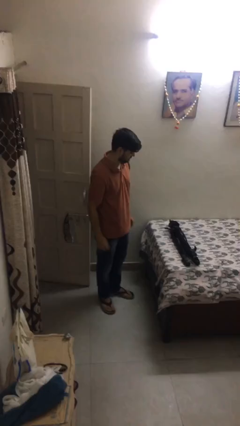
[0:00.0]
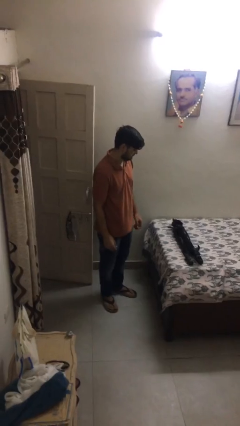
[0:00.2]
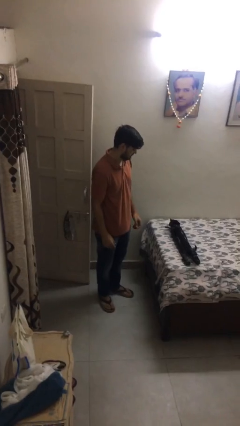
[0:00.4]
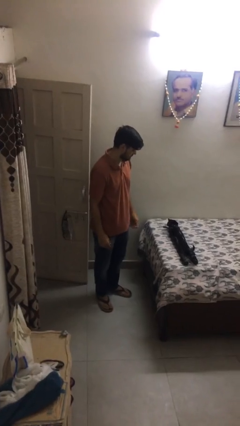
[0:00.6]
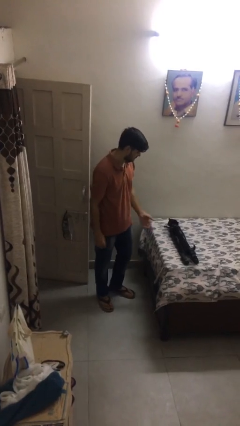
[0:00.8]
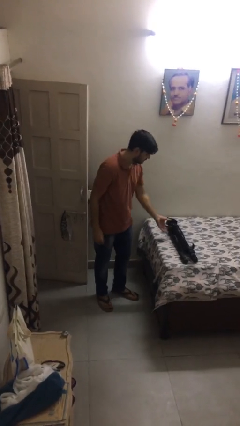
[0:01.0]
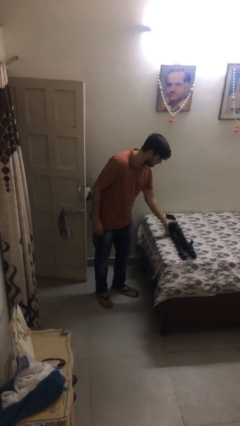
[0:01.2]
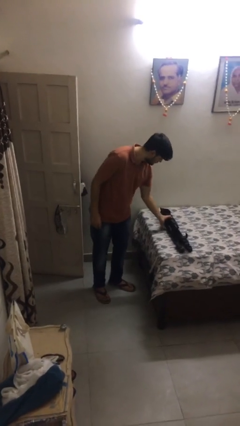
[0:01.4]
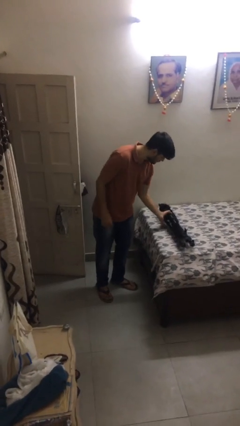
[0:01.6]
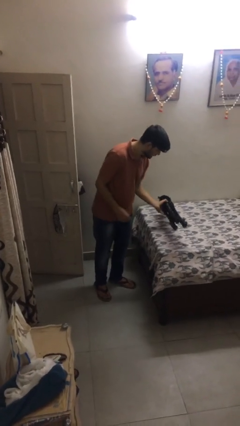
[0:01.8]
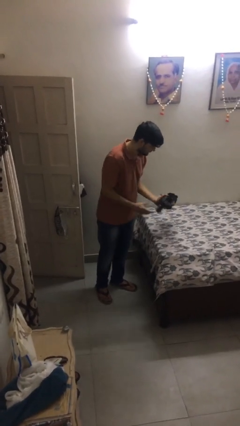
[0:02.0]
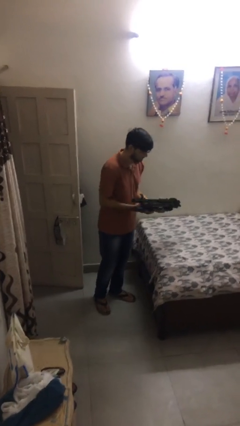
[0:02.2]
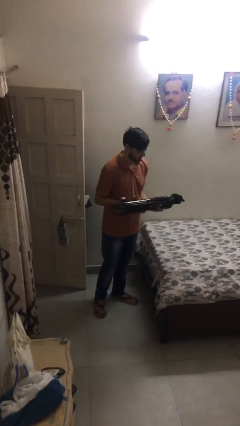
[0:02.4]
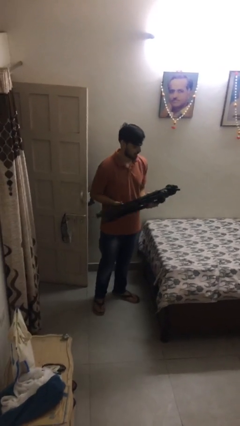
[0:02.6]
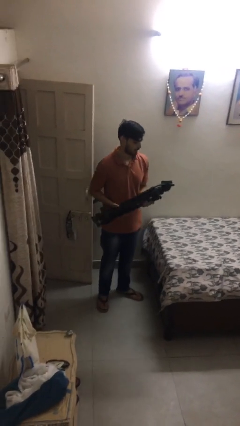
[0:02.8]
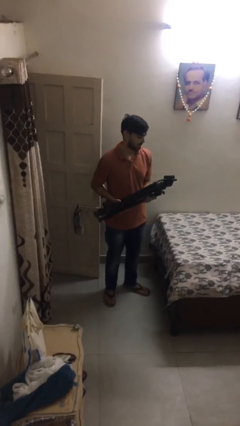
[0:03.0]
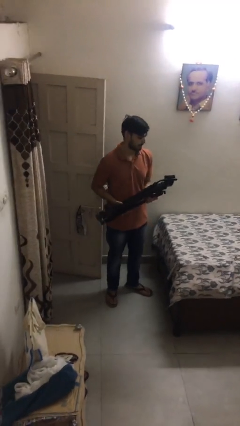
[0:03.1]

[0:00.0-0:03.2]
person picks up object from bed

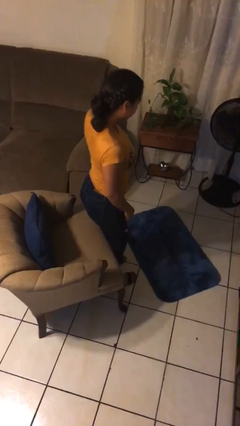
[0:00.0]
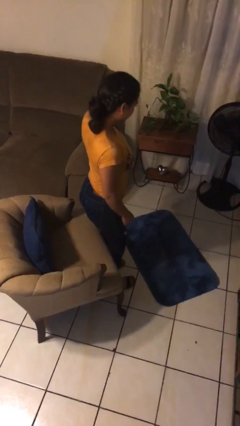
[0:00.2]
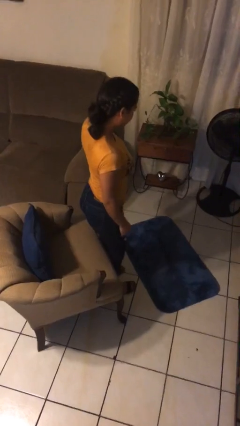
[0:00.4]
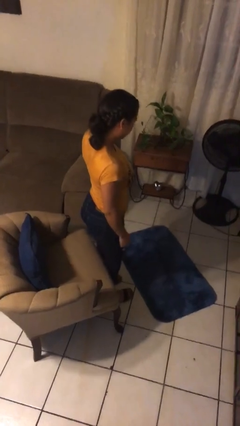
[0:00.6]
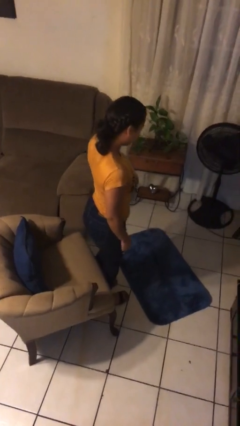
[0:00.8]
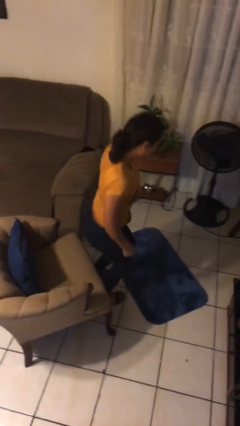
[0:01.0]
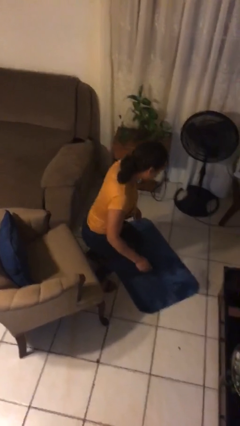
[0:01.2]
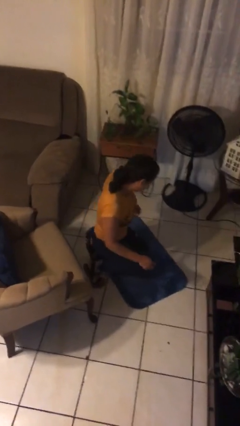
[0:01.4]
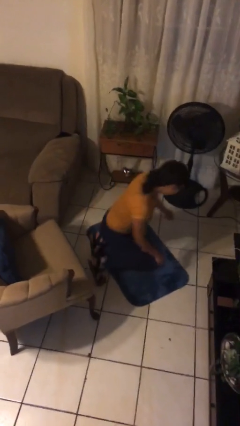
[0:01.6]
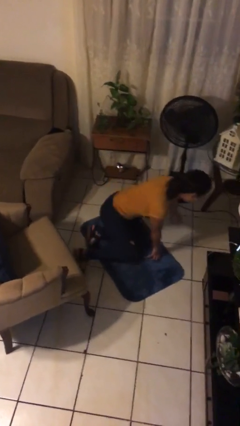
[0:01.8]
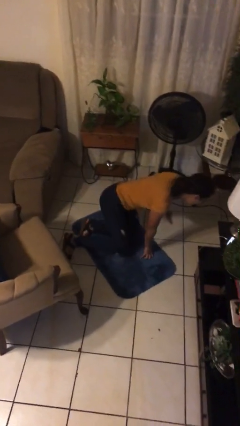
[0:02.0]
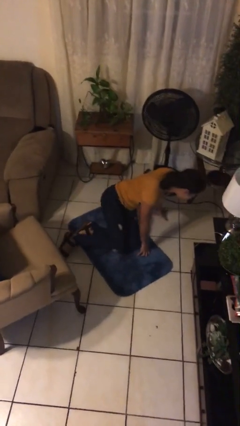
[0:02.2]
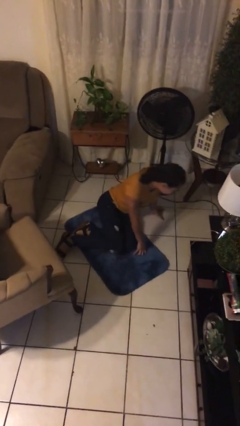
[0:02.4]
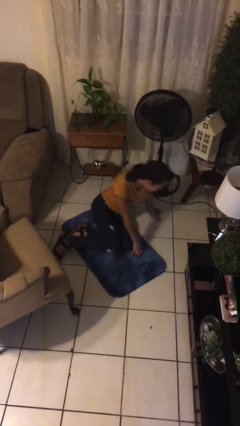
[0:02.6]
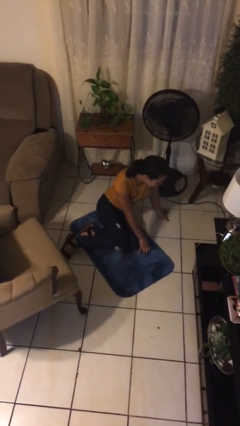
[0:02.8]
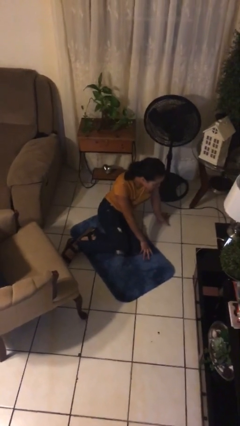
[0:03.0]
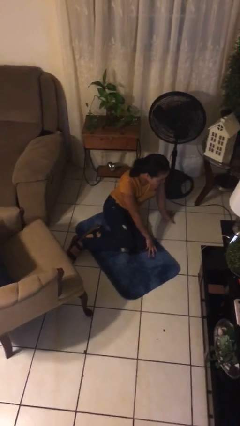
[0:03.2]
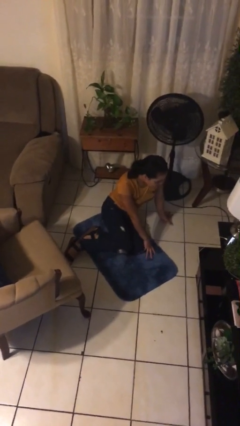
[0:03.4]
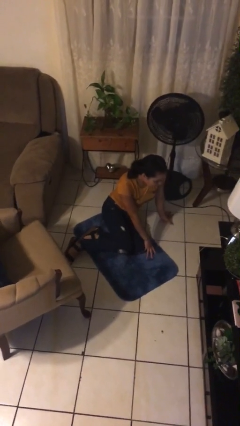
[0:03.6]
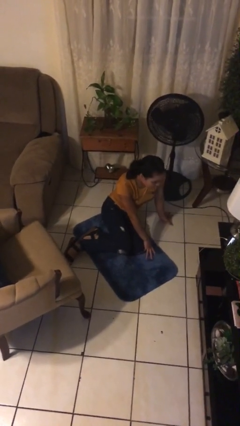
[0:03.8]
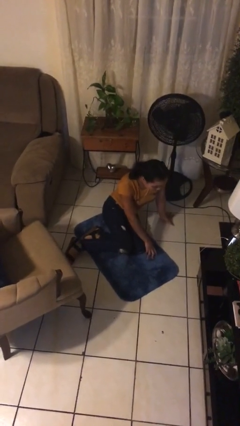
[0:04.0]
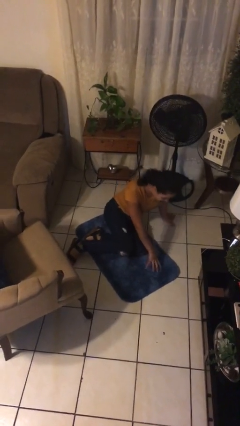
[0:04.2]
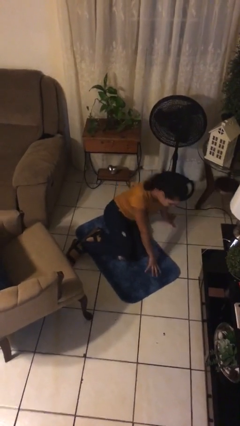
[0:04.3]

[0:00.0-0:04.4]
person falls from chair

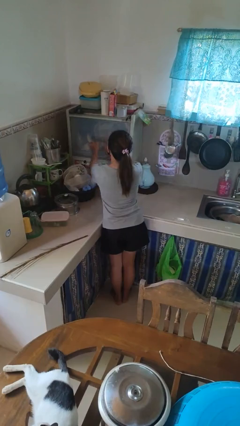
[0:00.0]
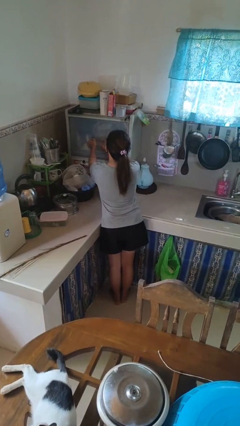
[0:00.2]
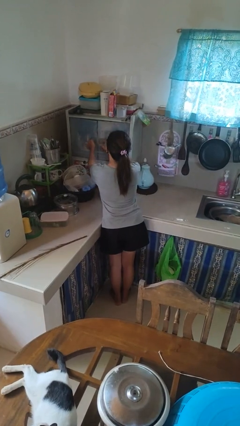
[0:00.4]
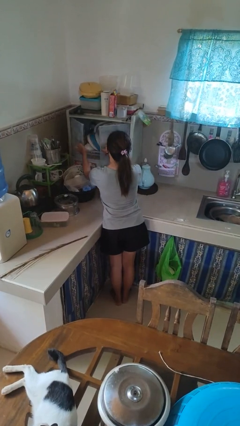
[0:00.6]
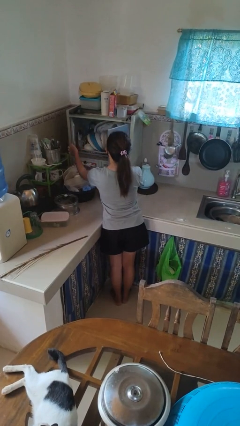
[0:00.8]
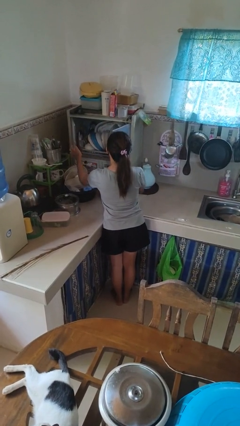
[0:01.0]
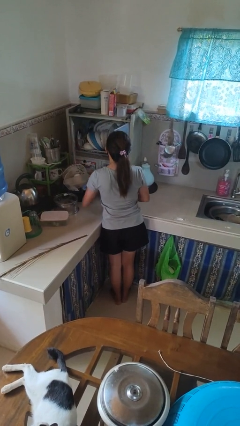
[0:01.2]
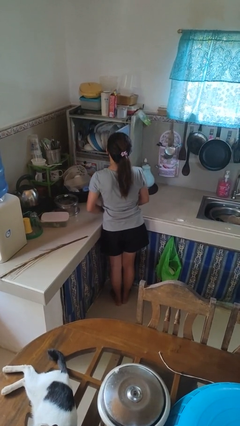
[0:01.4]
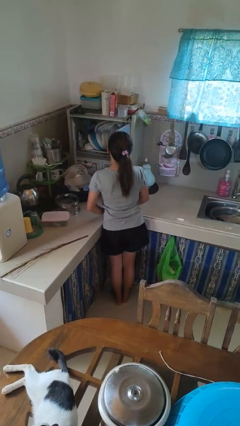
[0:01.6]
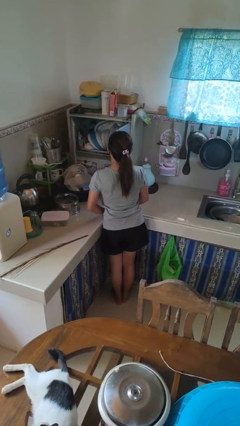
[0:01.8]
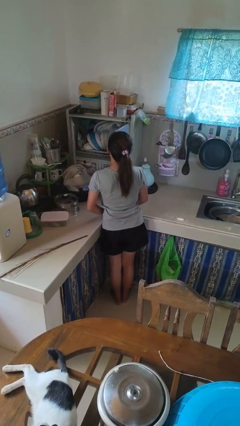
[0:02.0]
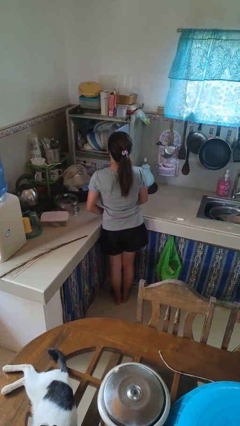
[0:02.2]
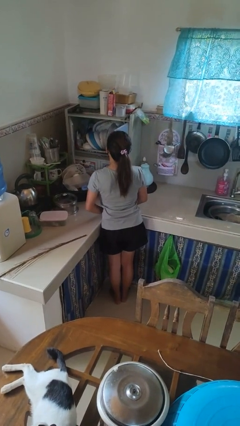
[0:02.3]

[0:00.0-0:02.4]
person opens kitchen drawer

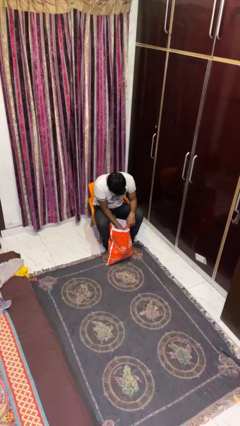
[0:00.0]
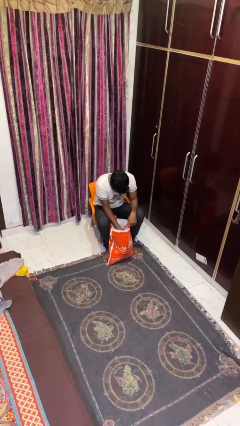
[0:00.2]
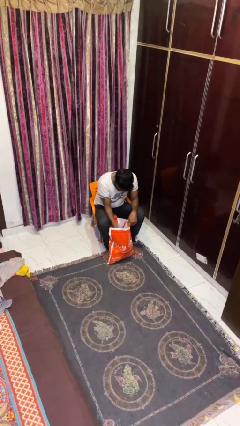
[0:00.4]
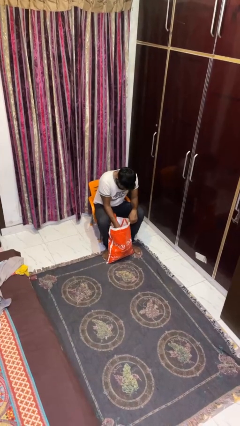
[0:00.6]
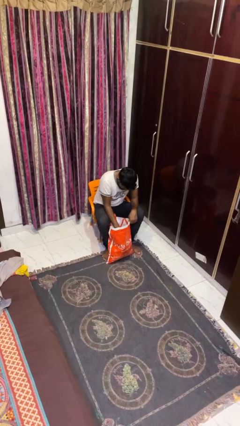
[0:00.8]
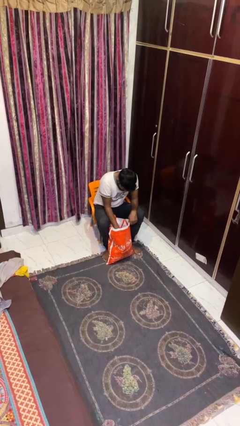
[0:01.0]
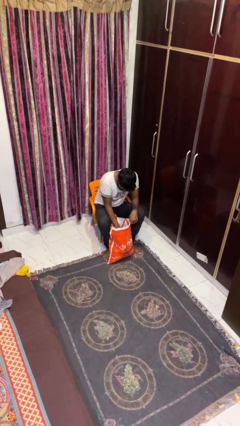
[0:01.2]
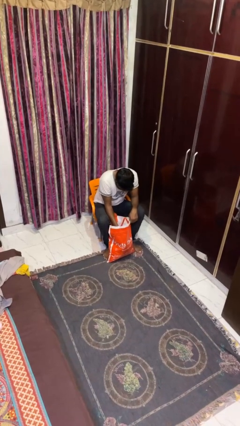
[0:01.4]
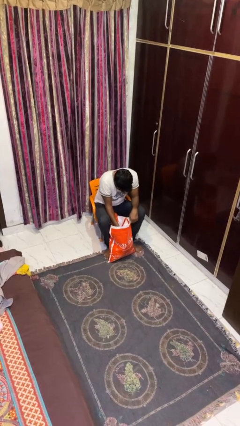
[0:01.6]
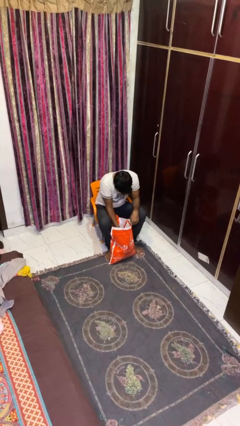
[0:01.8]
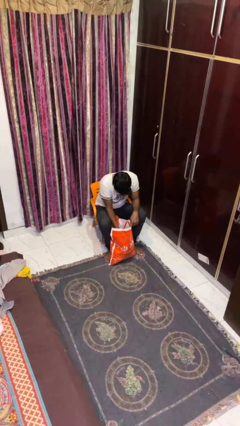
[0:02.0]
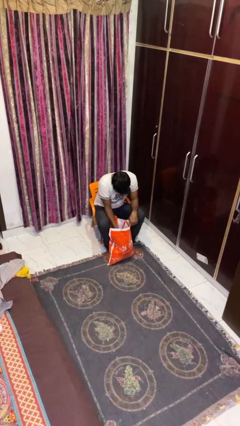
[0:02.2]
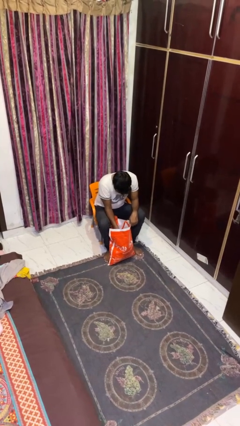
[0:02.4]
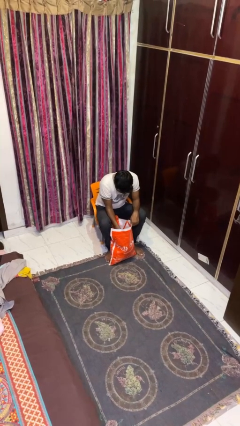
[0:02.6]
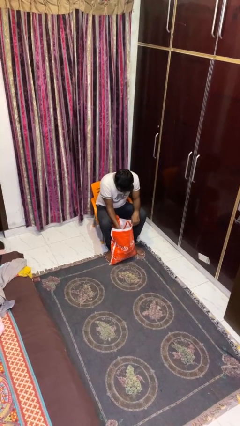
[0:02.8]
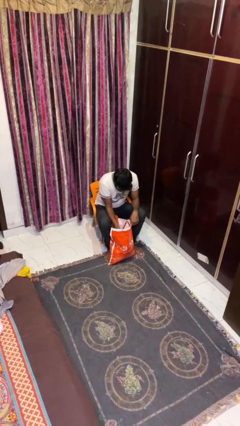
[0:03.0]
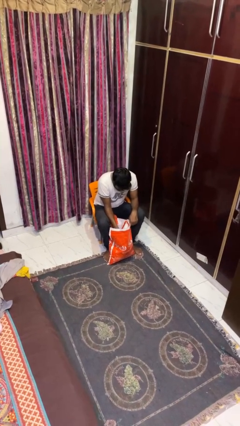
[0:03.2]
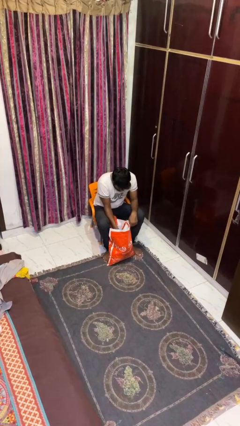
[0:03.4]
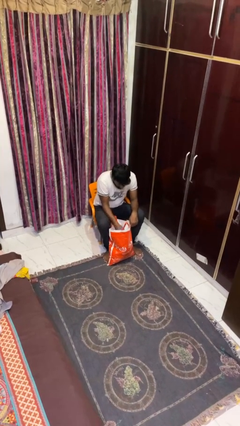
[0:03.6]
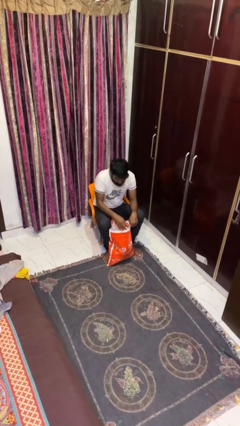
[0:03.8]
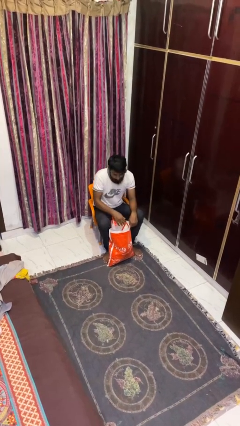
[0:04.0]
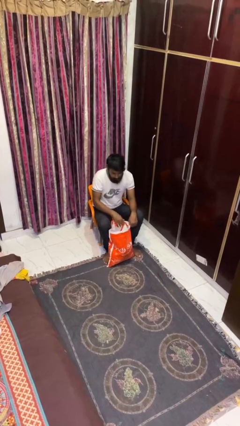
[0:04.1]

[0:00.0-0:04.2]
person searches in bag

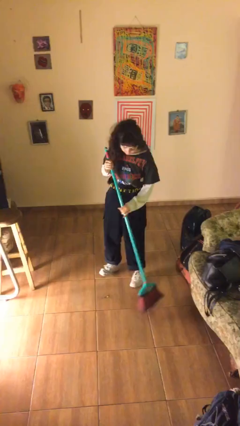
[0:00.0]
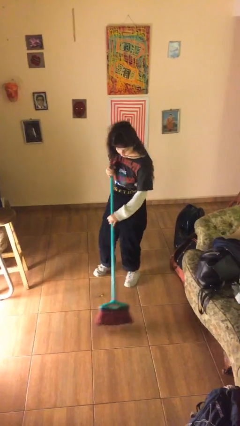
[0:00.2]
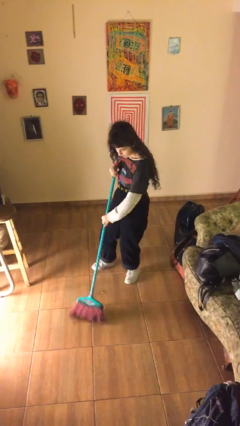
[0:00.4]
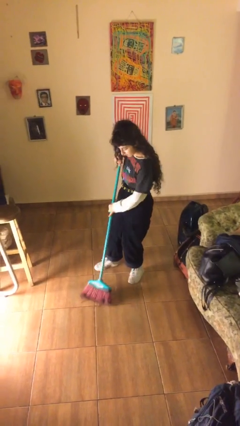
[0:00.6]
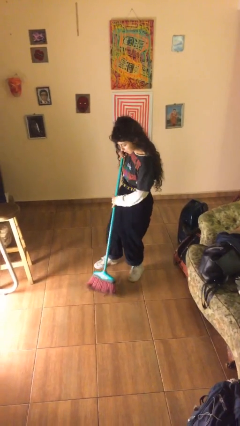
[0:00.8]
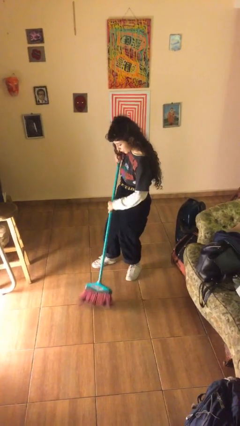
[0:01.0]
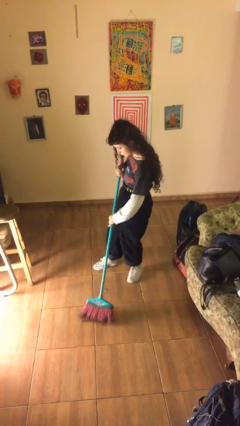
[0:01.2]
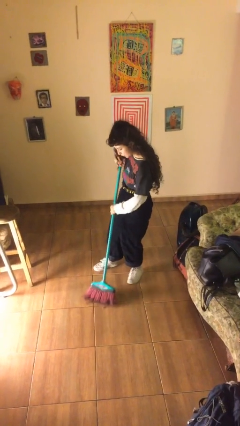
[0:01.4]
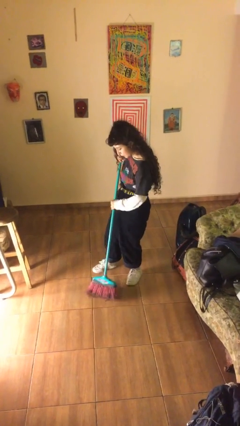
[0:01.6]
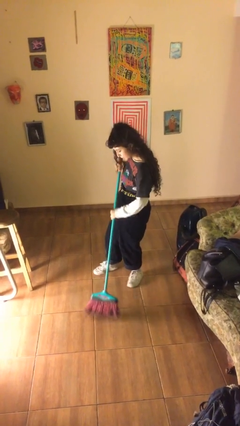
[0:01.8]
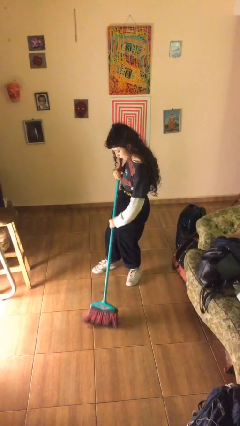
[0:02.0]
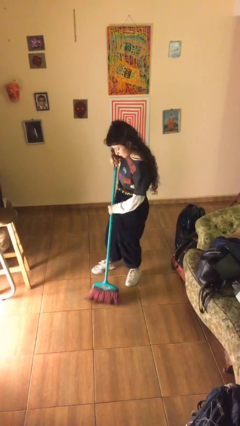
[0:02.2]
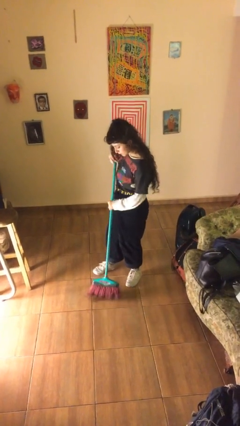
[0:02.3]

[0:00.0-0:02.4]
person sweeps floor

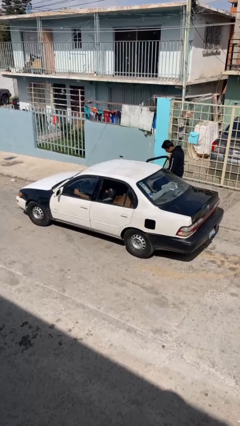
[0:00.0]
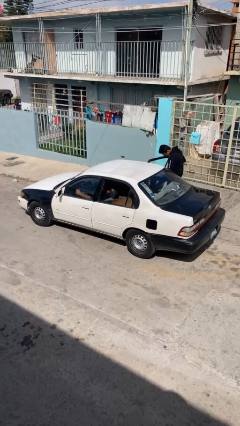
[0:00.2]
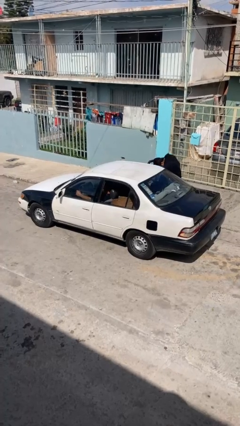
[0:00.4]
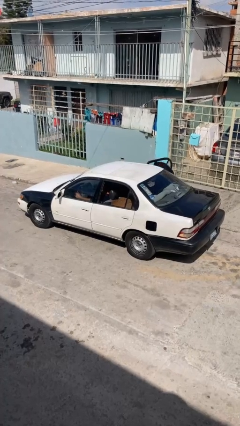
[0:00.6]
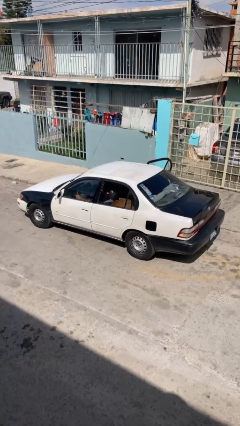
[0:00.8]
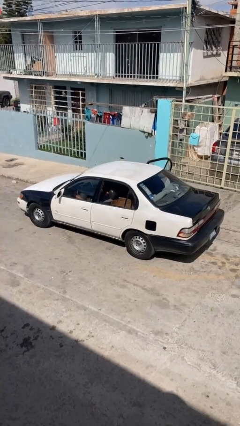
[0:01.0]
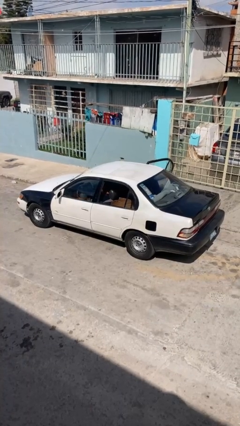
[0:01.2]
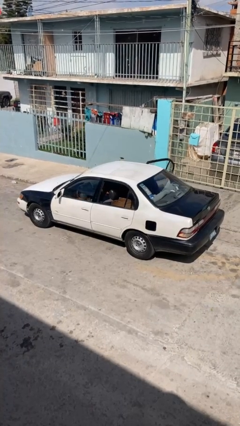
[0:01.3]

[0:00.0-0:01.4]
car picks up person
